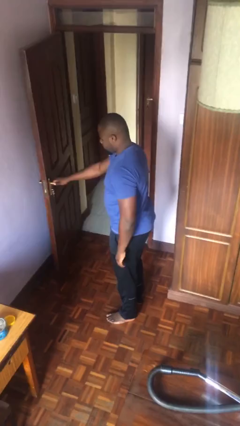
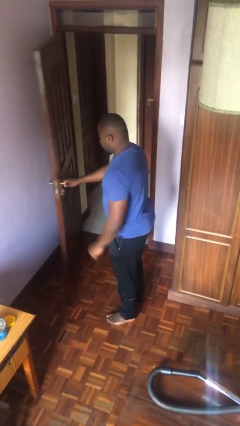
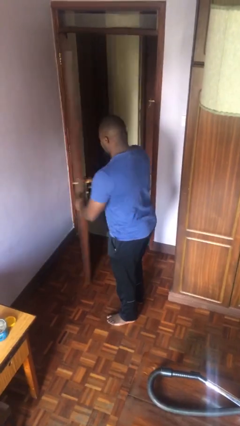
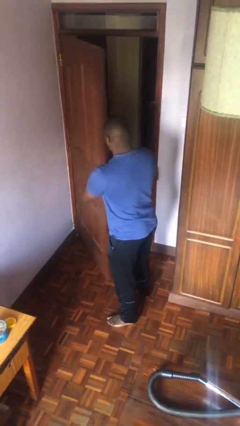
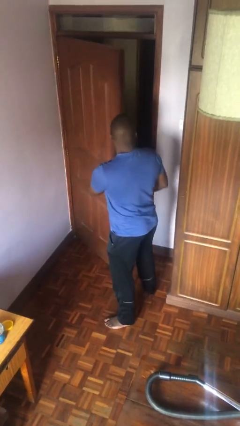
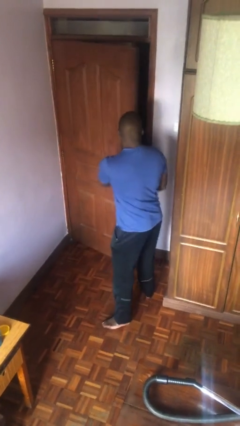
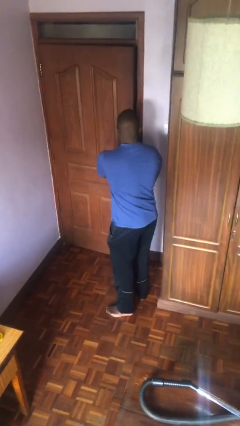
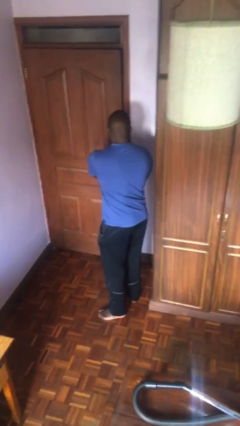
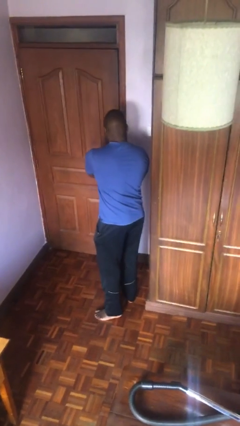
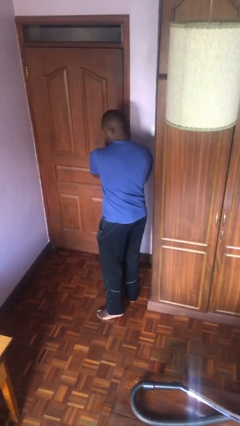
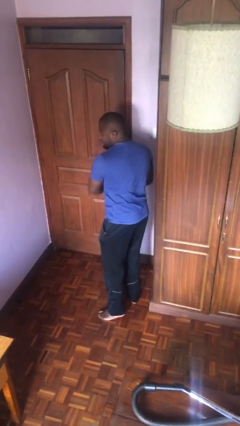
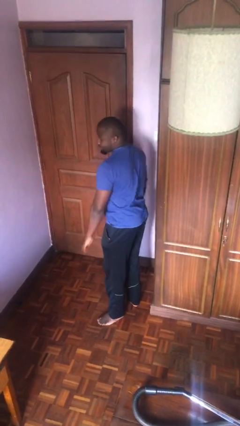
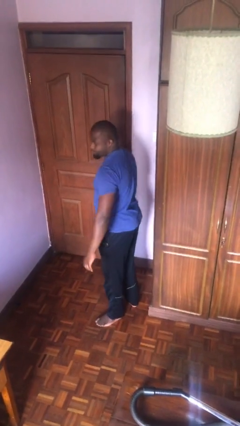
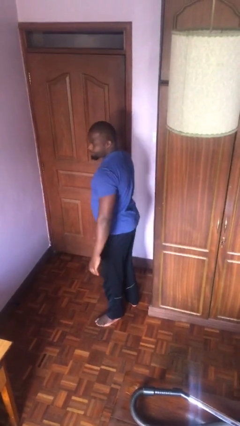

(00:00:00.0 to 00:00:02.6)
person closes facility door

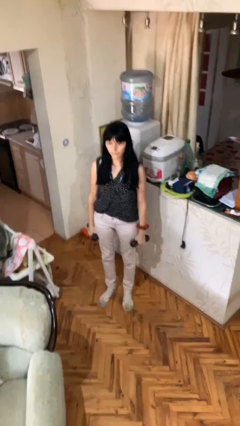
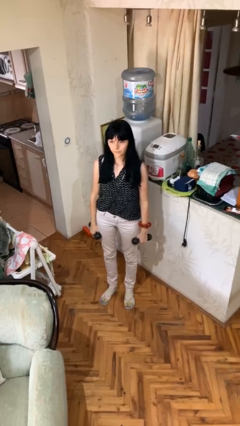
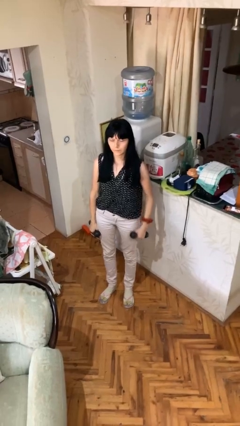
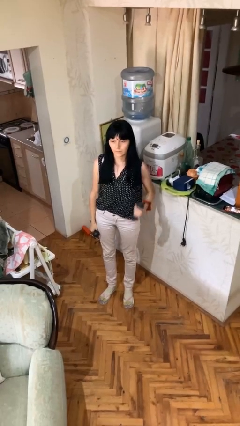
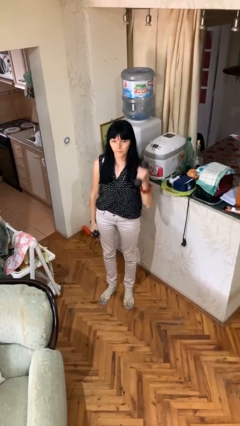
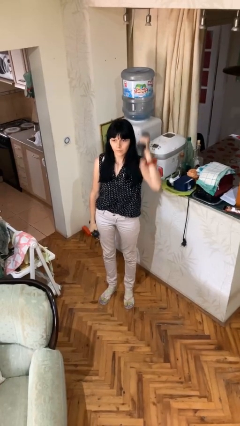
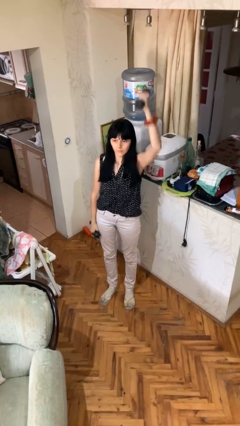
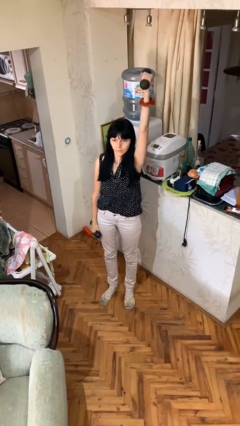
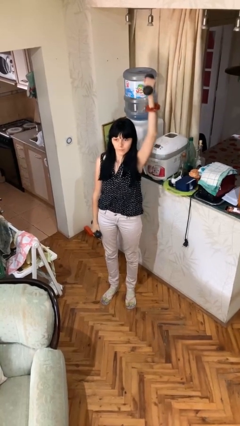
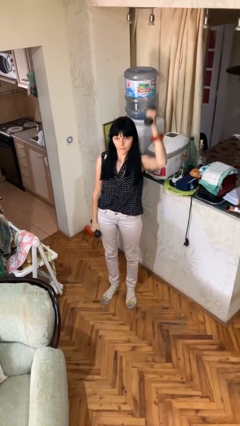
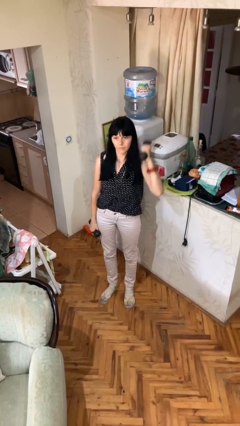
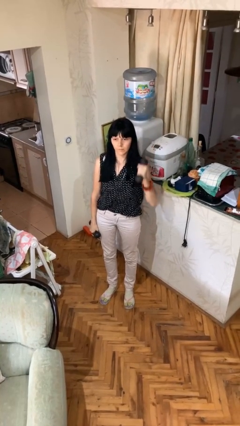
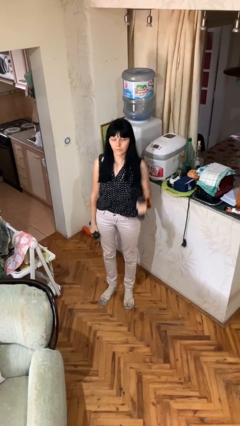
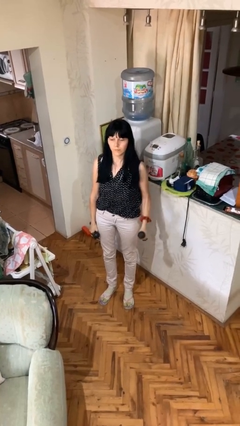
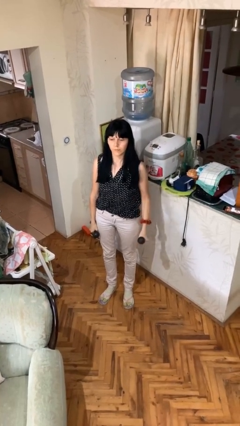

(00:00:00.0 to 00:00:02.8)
person lifts dumbbells

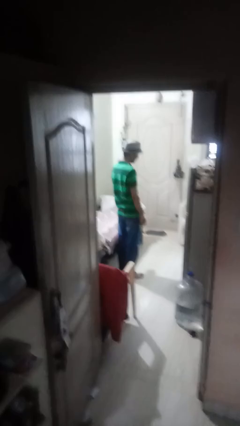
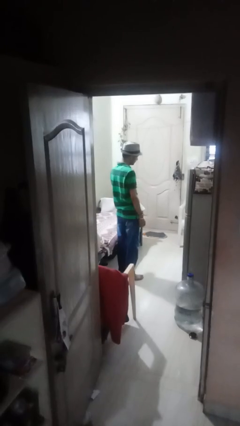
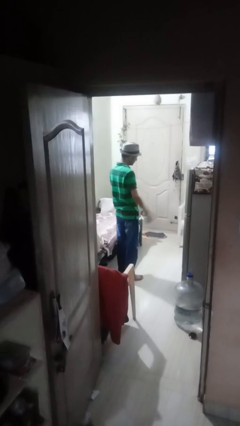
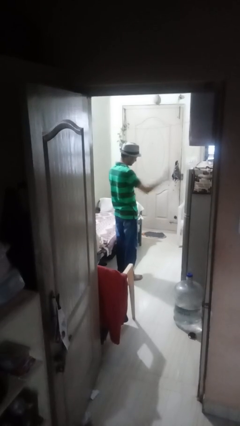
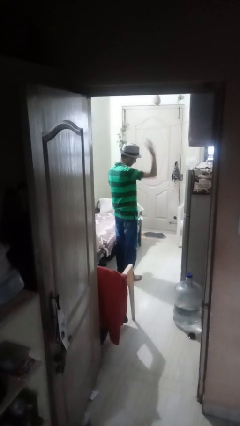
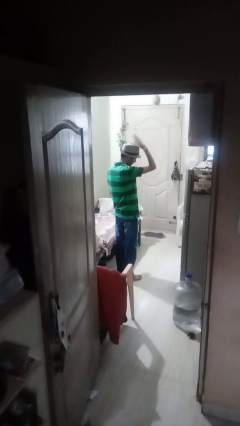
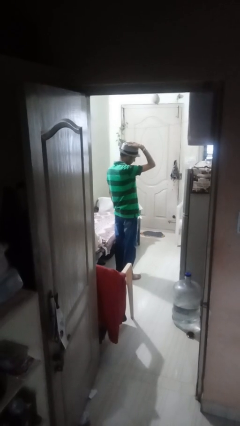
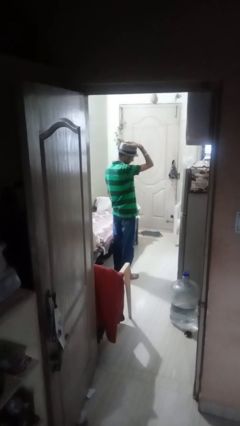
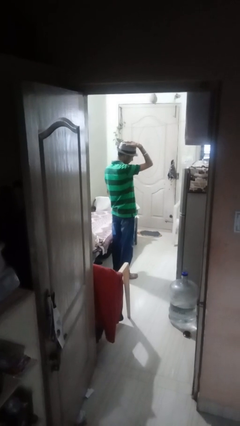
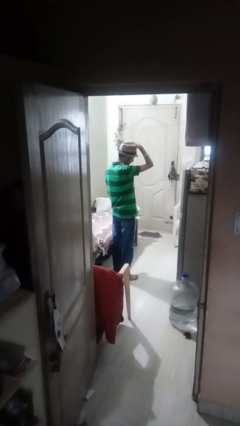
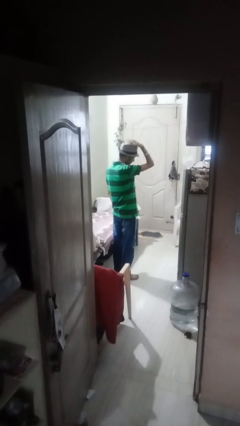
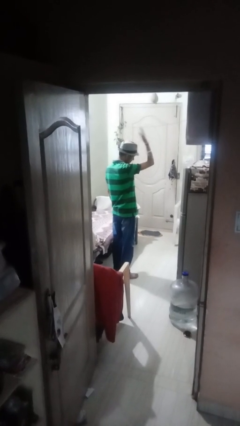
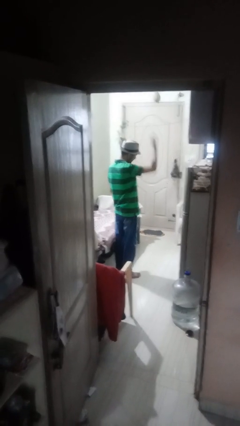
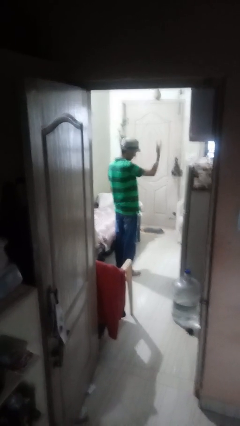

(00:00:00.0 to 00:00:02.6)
person pats head

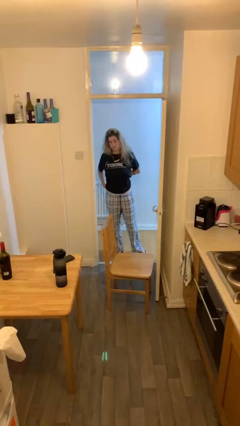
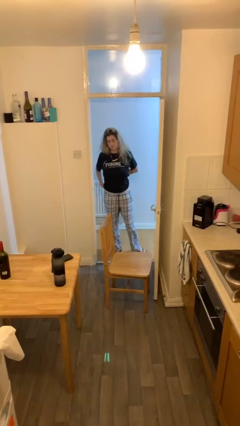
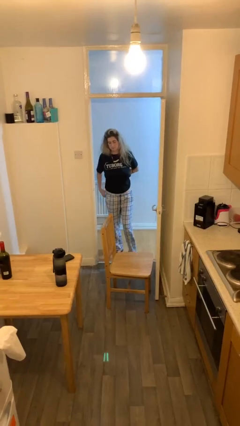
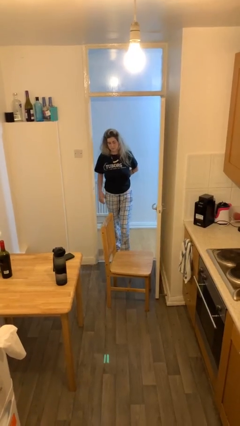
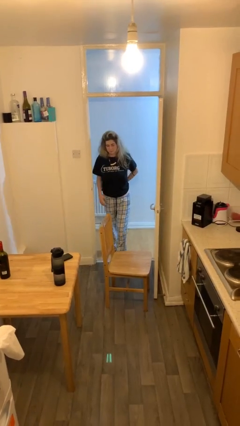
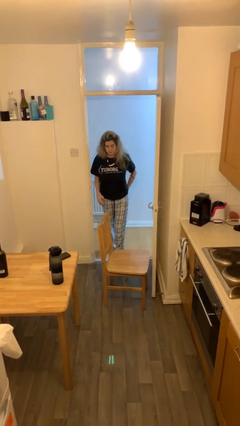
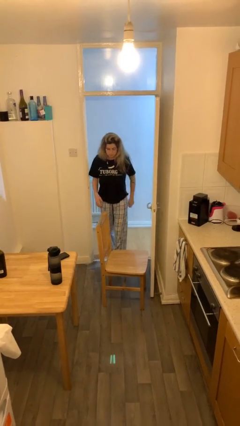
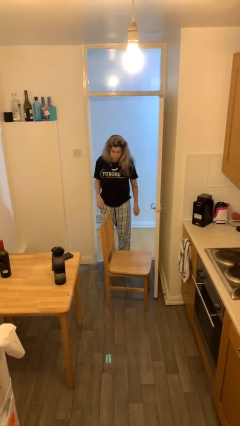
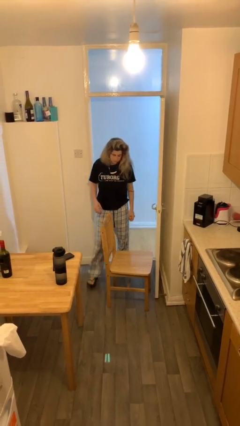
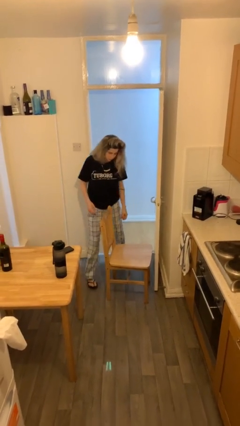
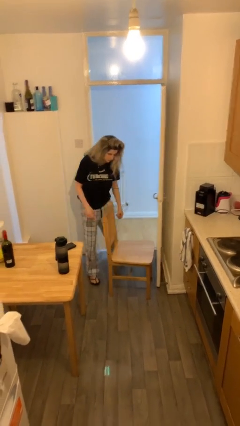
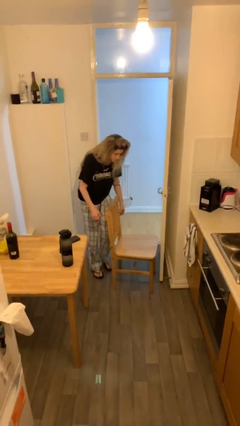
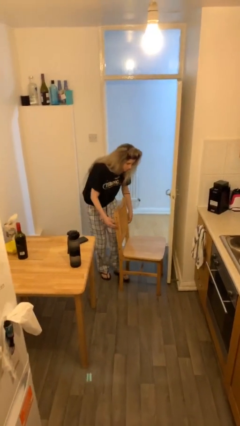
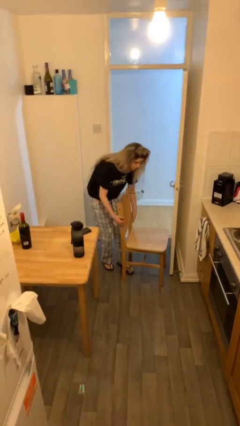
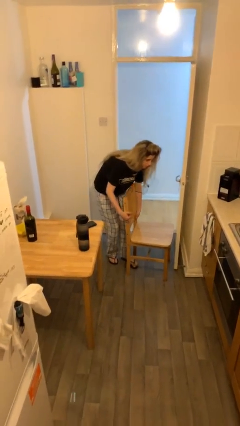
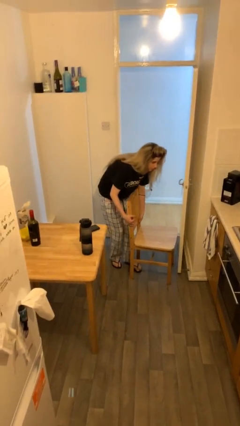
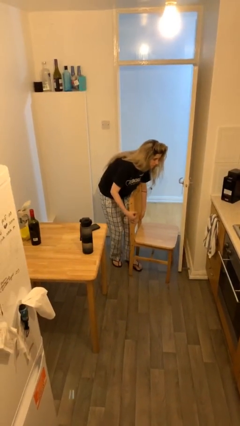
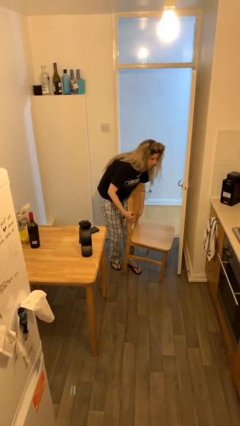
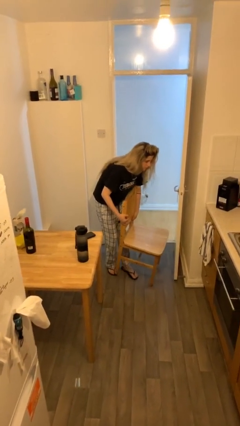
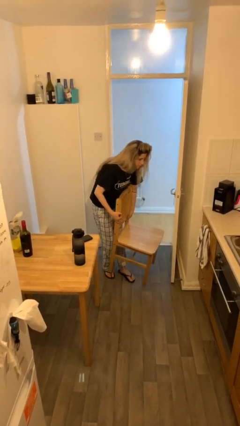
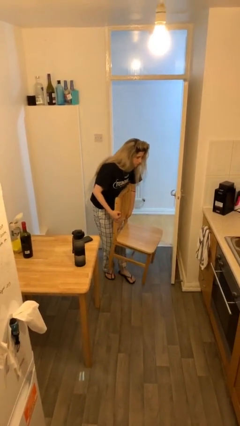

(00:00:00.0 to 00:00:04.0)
person picks up object from floor

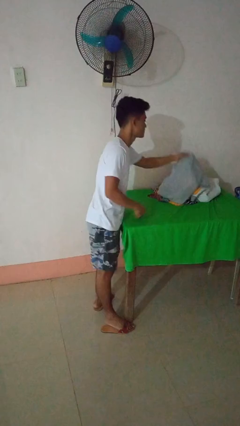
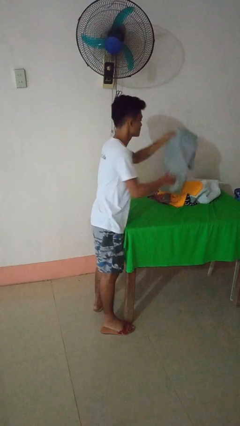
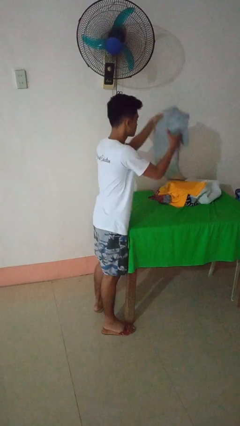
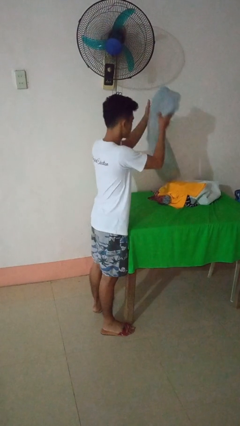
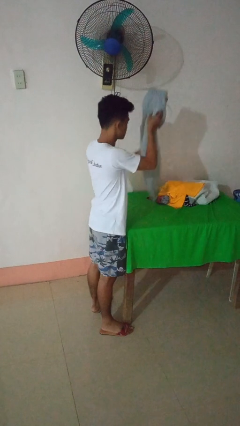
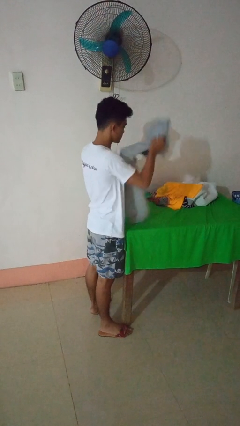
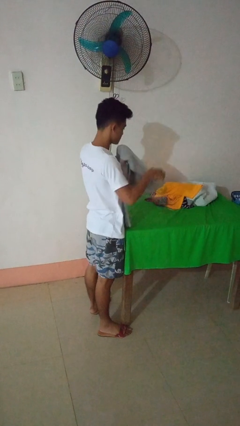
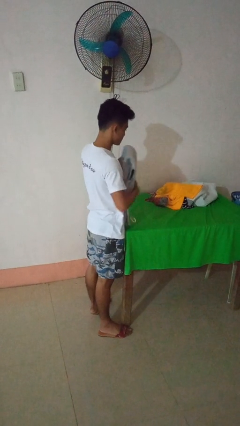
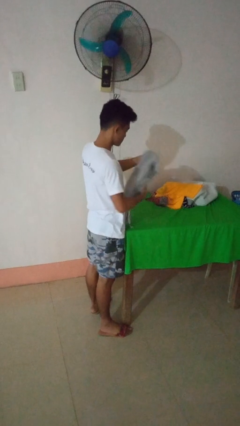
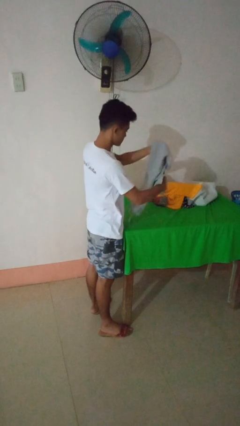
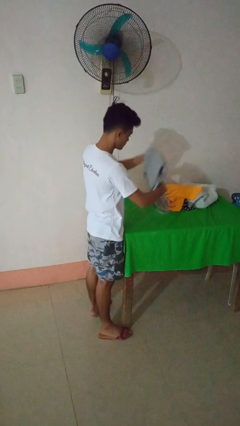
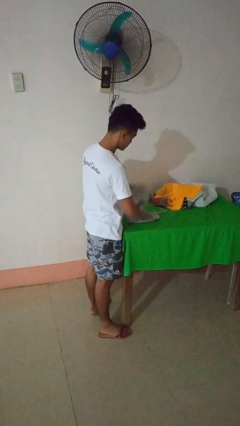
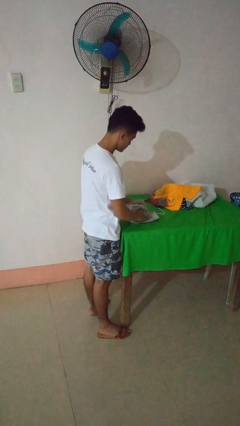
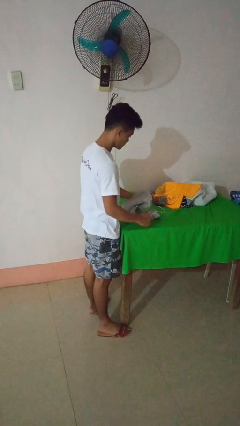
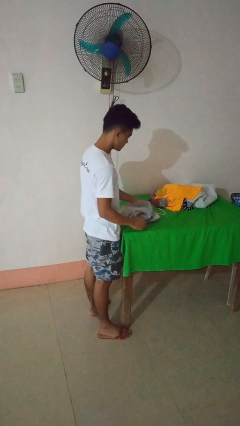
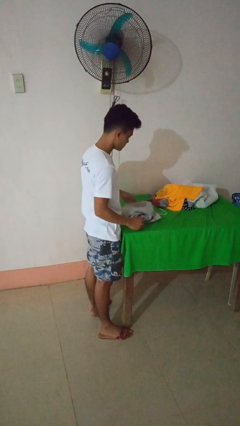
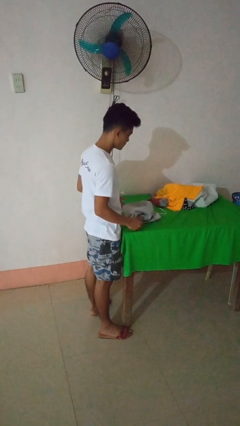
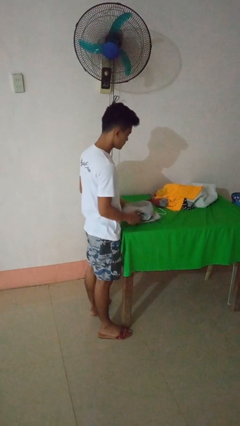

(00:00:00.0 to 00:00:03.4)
person folds pants

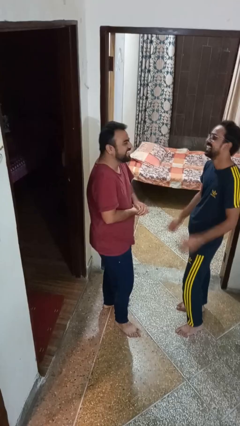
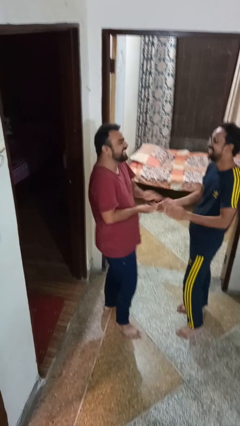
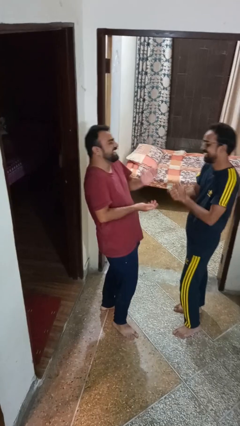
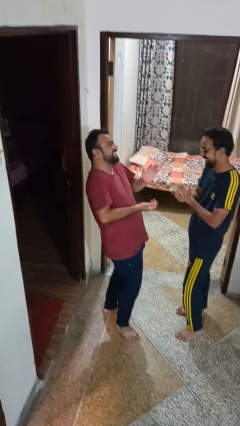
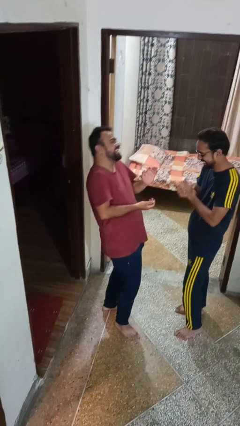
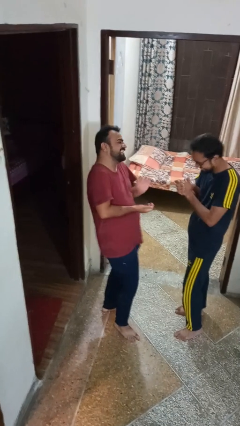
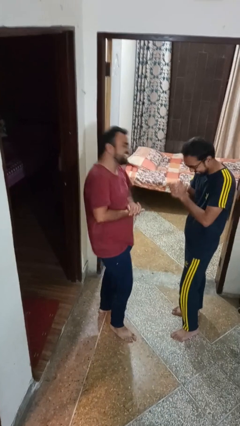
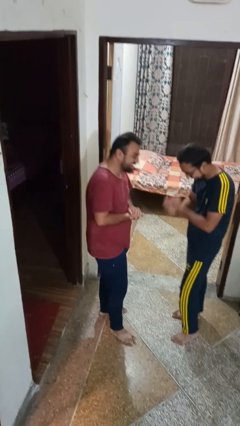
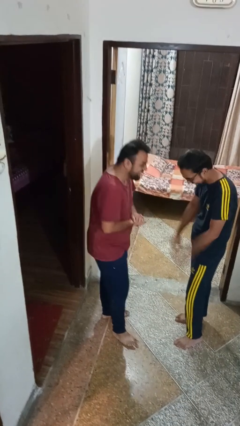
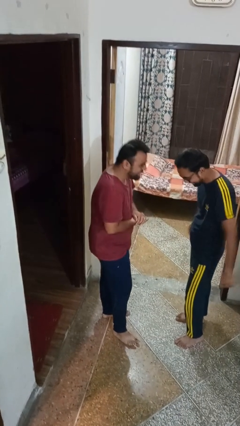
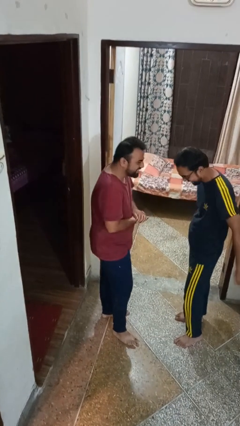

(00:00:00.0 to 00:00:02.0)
person laughs with person
